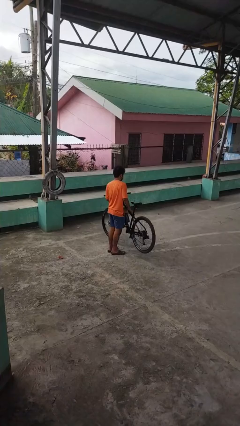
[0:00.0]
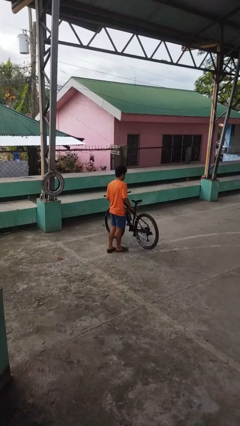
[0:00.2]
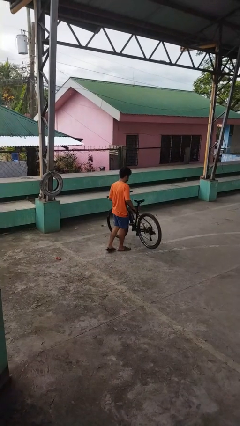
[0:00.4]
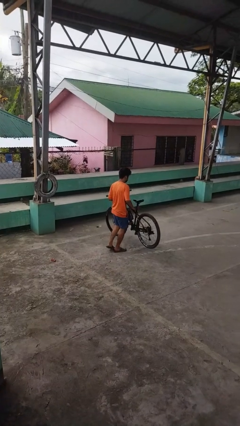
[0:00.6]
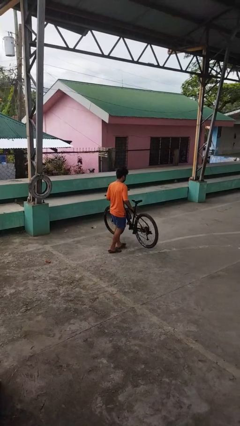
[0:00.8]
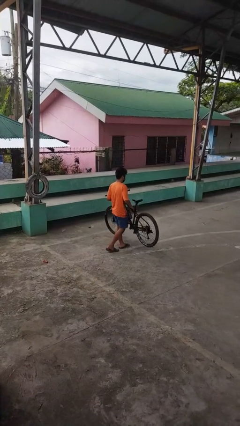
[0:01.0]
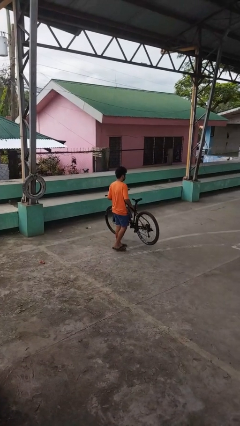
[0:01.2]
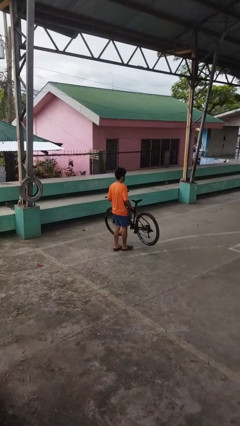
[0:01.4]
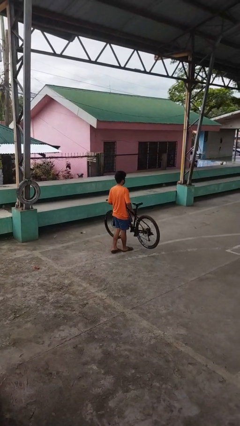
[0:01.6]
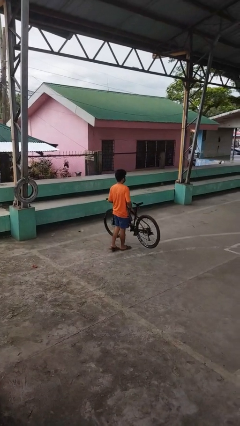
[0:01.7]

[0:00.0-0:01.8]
person carries bicycle

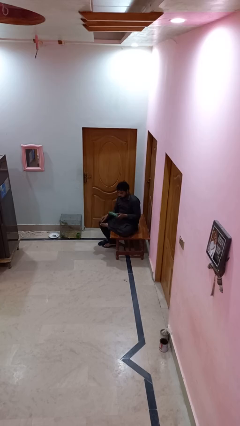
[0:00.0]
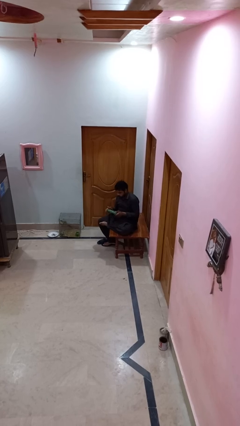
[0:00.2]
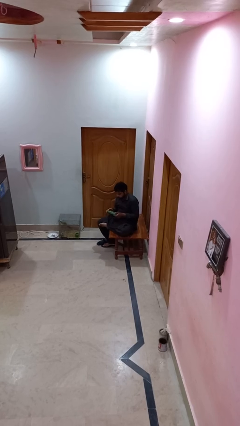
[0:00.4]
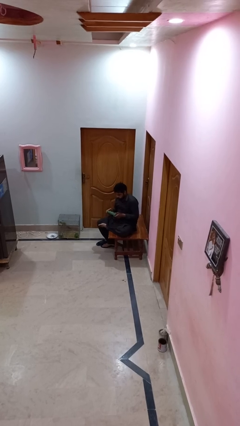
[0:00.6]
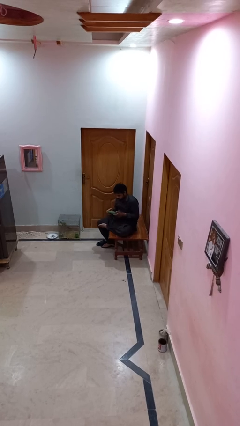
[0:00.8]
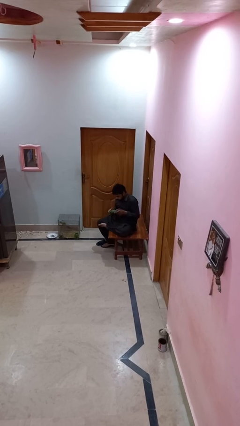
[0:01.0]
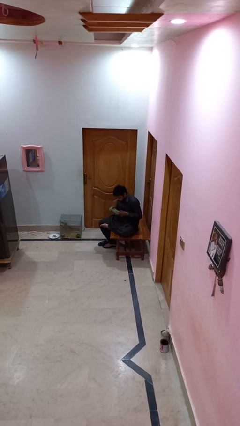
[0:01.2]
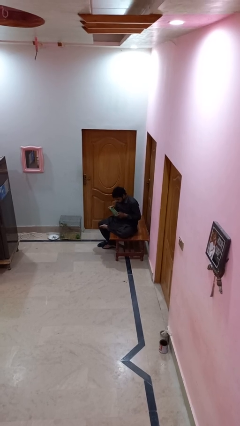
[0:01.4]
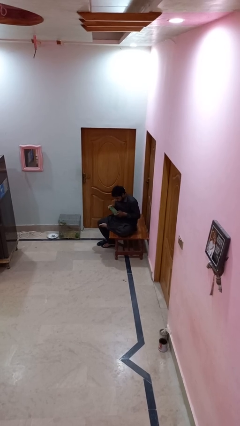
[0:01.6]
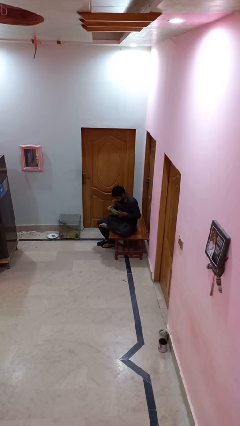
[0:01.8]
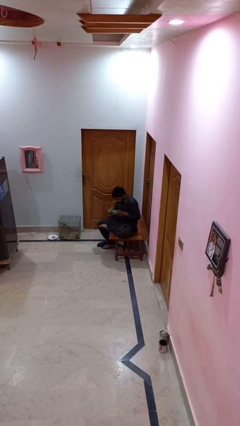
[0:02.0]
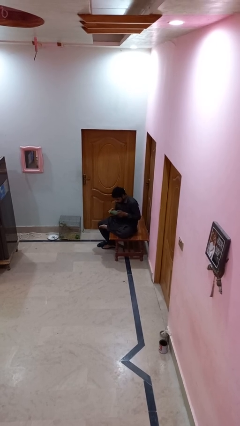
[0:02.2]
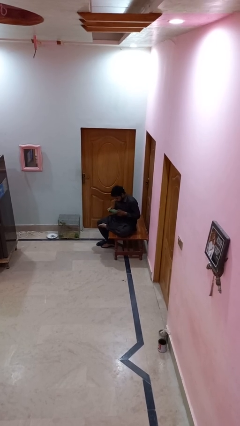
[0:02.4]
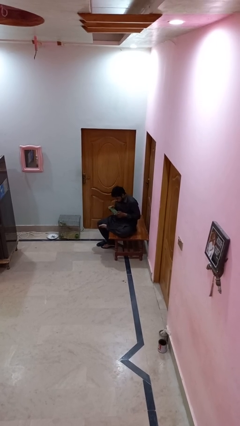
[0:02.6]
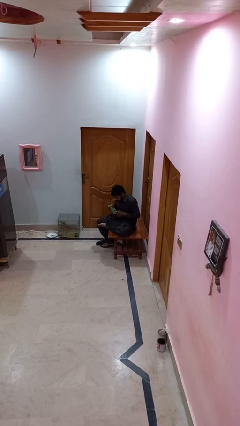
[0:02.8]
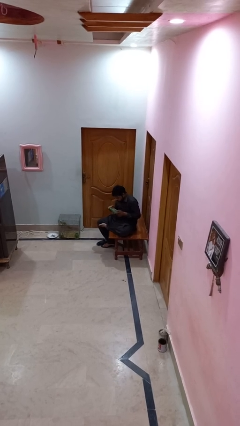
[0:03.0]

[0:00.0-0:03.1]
person interacts with handheld game

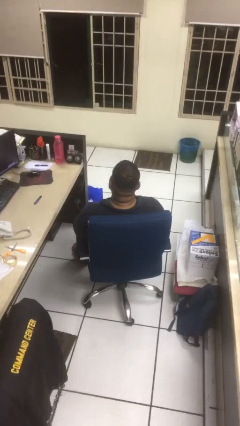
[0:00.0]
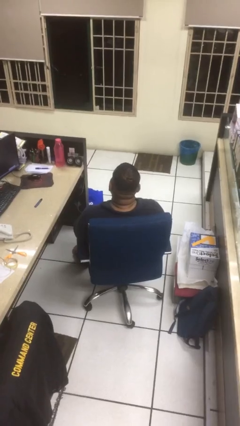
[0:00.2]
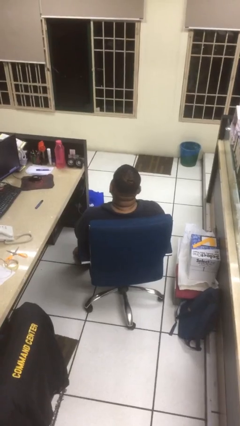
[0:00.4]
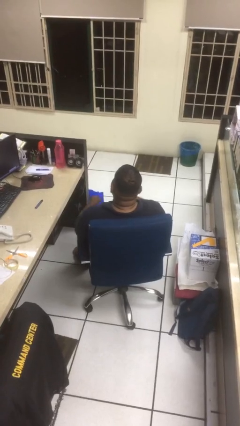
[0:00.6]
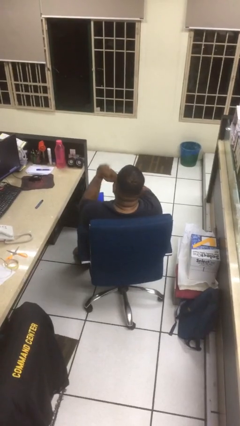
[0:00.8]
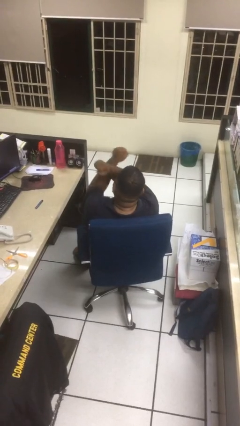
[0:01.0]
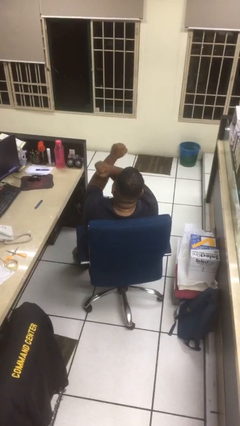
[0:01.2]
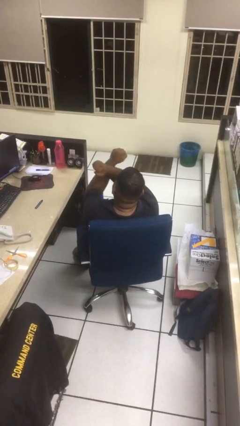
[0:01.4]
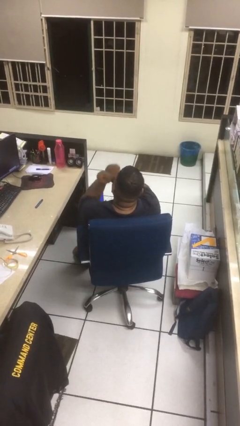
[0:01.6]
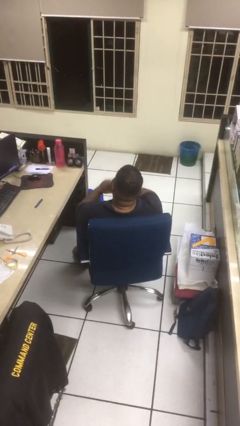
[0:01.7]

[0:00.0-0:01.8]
person gestures arms x

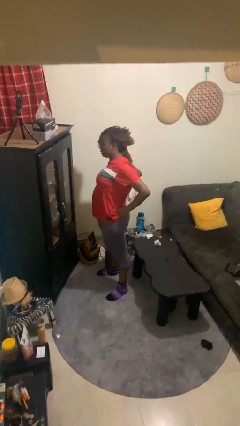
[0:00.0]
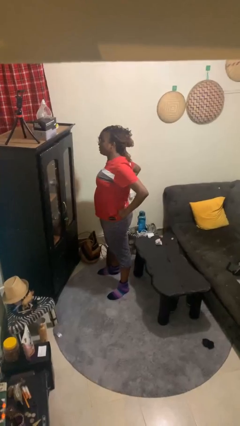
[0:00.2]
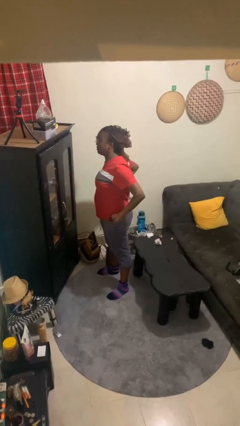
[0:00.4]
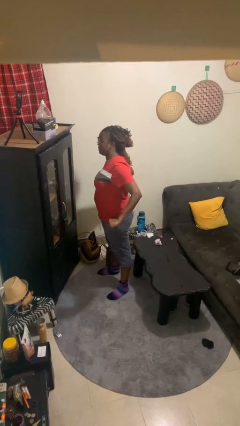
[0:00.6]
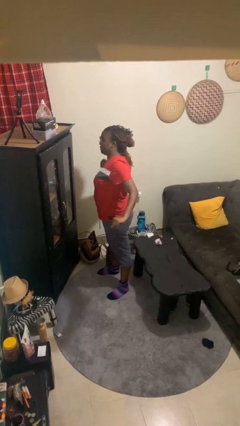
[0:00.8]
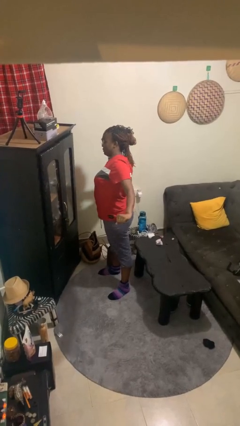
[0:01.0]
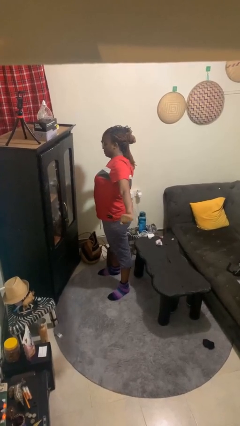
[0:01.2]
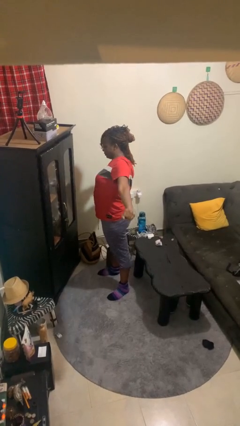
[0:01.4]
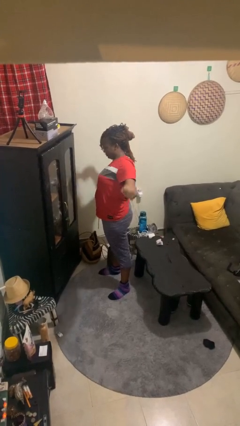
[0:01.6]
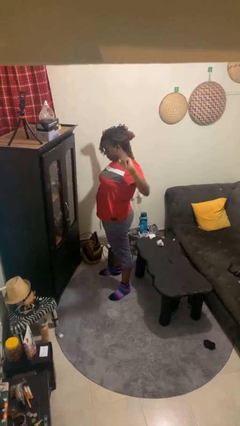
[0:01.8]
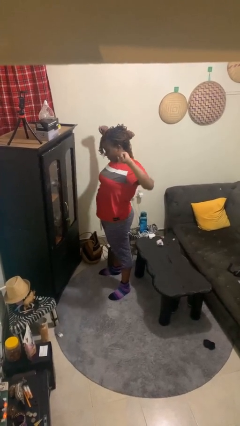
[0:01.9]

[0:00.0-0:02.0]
person stretches arms to side

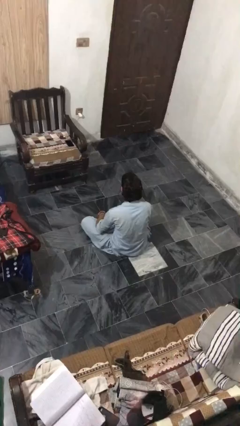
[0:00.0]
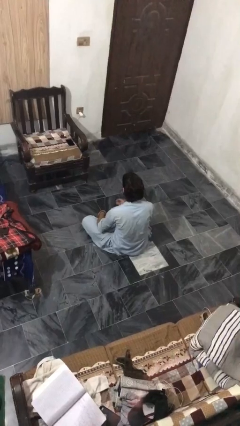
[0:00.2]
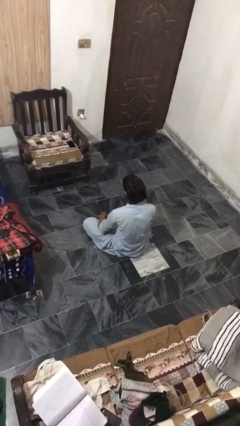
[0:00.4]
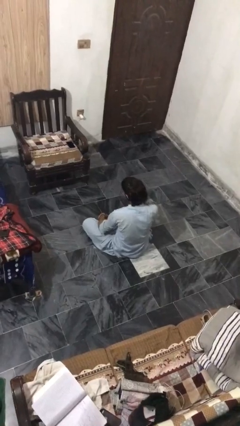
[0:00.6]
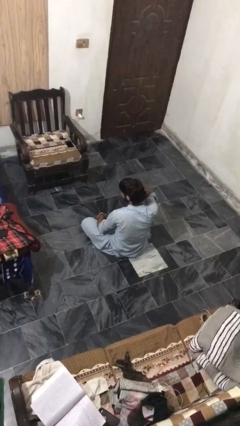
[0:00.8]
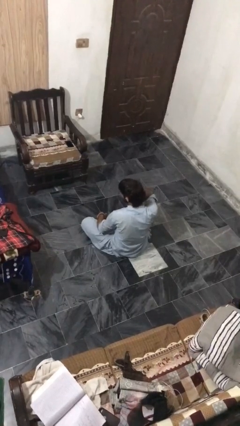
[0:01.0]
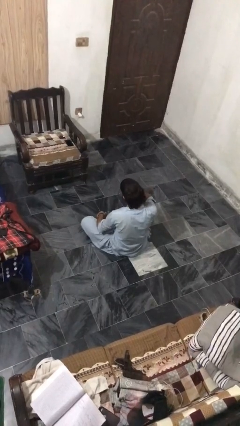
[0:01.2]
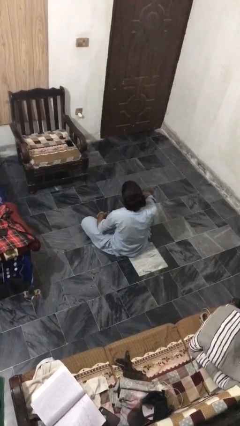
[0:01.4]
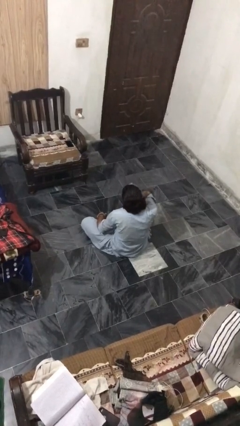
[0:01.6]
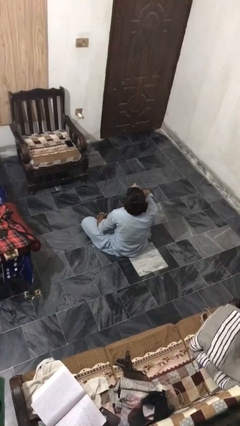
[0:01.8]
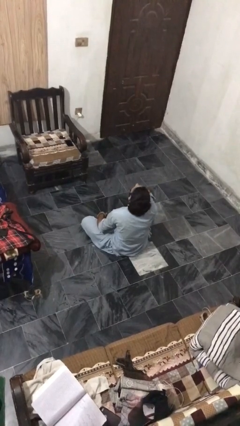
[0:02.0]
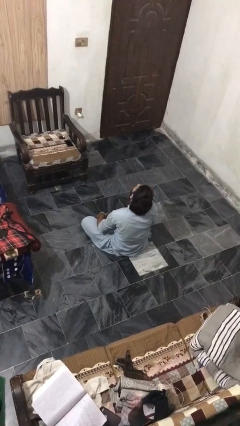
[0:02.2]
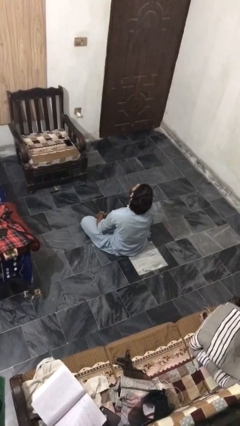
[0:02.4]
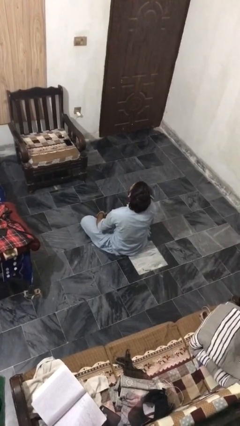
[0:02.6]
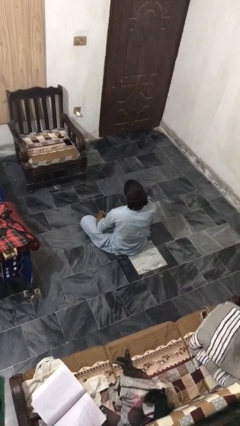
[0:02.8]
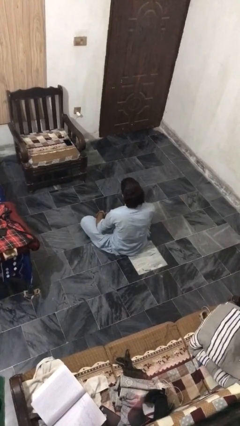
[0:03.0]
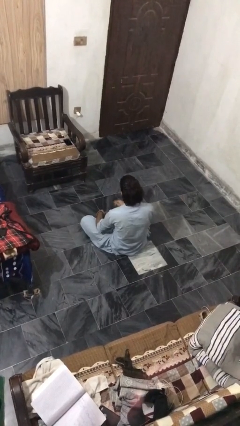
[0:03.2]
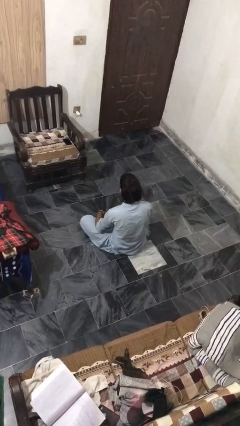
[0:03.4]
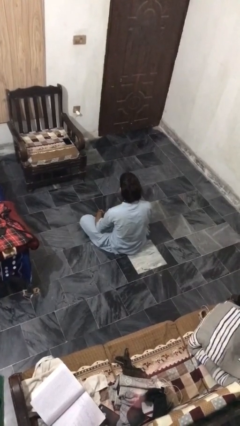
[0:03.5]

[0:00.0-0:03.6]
person rubs neck

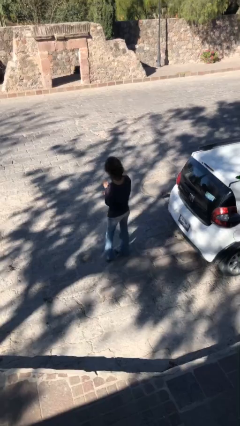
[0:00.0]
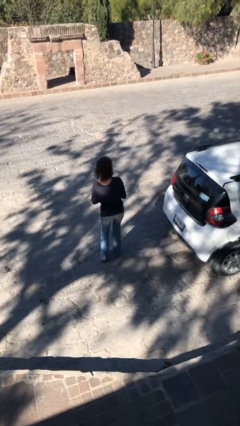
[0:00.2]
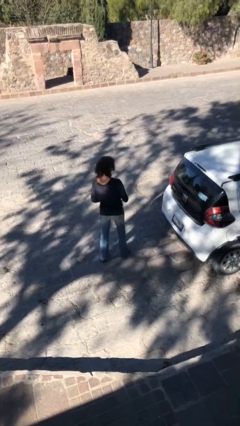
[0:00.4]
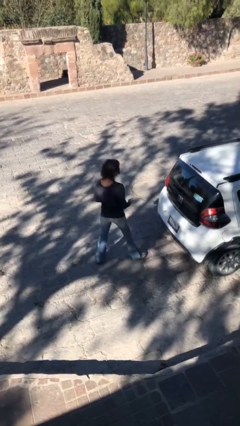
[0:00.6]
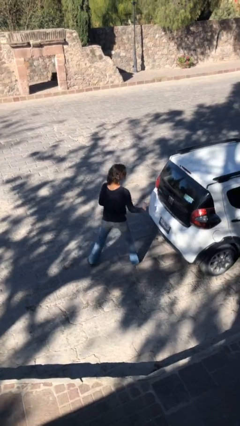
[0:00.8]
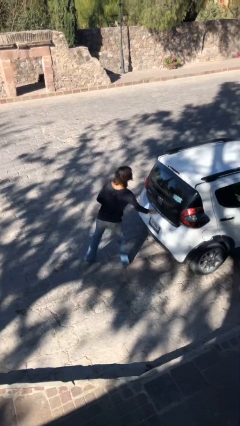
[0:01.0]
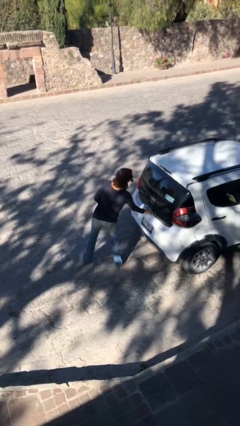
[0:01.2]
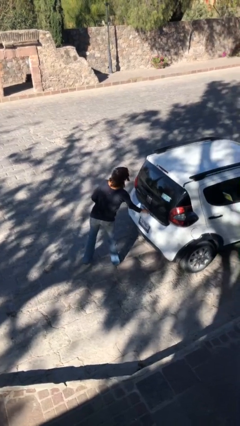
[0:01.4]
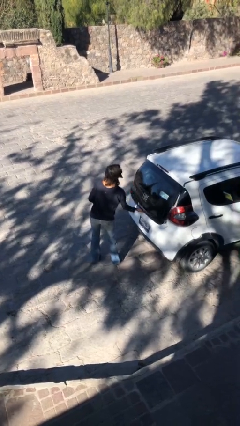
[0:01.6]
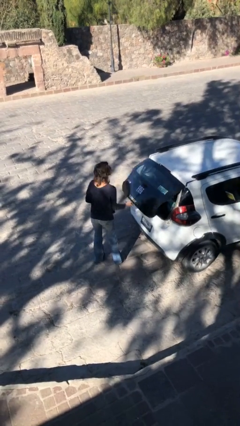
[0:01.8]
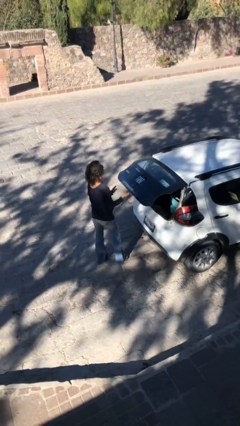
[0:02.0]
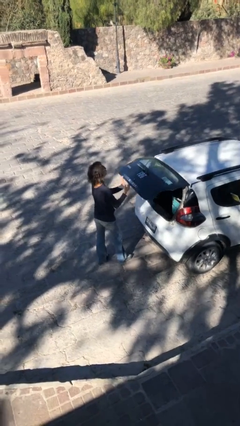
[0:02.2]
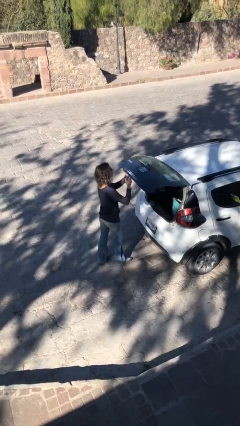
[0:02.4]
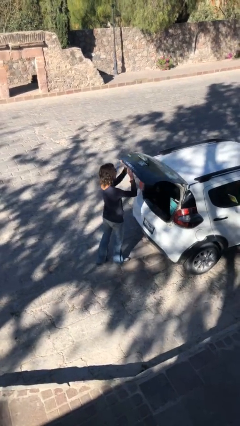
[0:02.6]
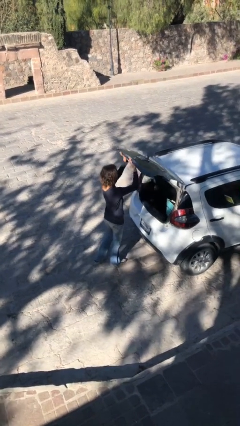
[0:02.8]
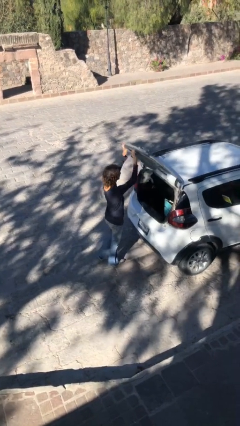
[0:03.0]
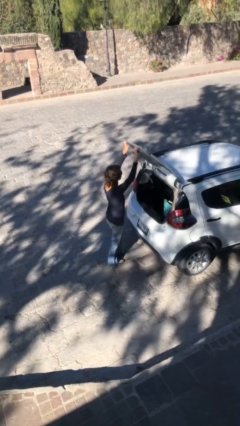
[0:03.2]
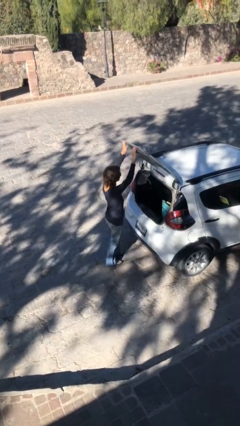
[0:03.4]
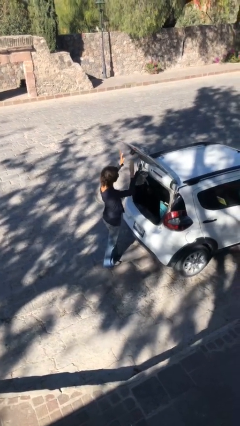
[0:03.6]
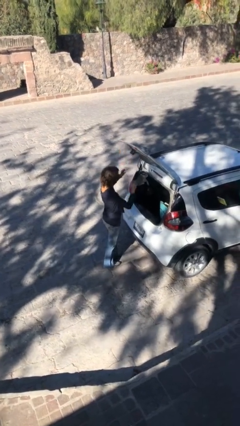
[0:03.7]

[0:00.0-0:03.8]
person opens car trunk

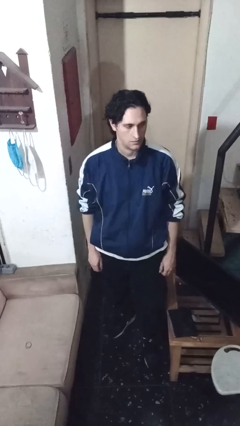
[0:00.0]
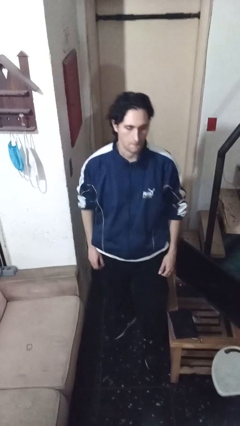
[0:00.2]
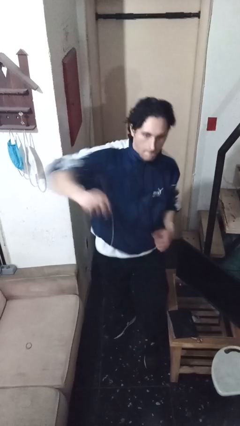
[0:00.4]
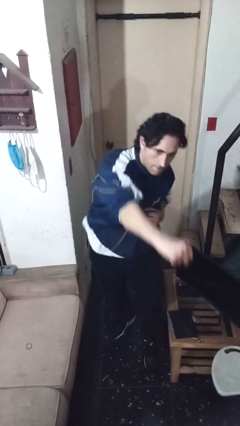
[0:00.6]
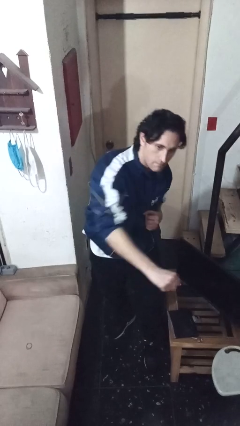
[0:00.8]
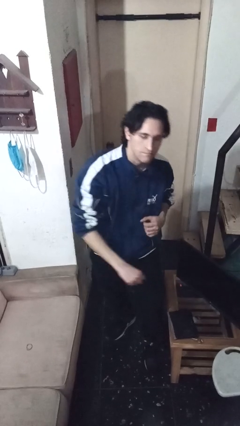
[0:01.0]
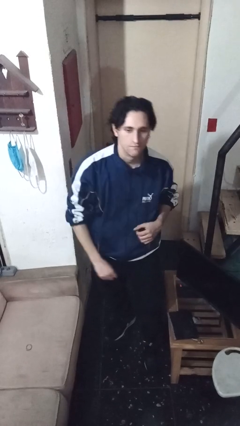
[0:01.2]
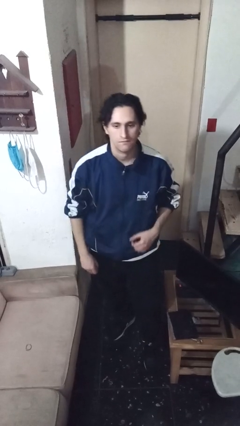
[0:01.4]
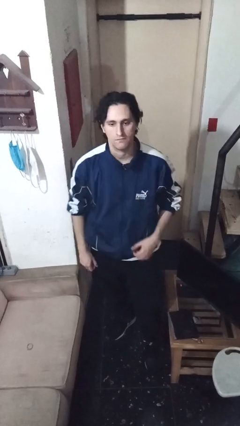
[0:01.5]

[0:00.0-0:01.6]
person punches
